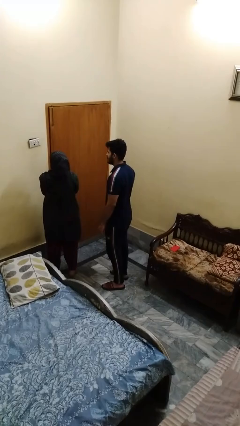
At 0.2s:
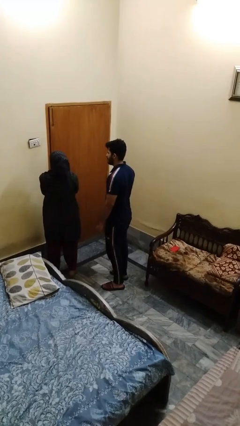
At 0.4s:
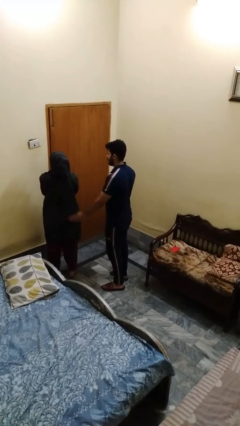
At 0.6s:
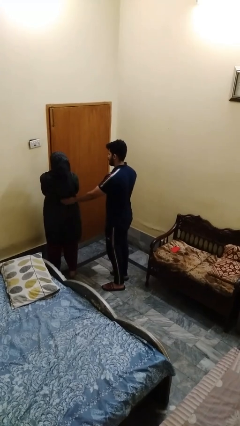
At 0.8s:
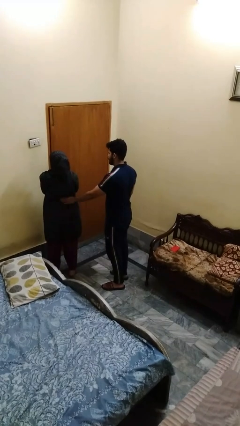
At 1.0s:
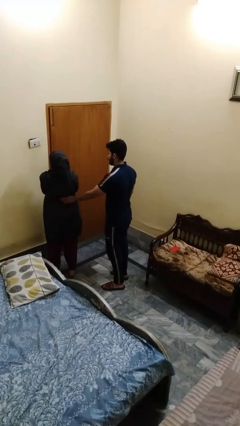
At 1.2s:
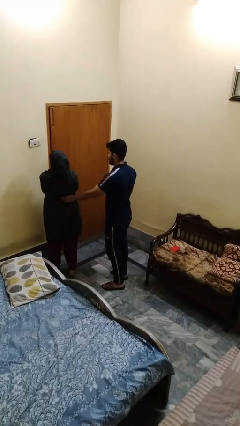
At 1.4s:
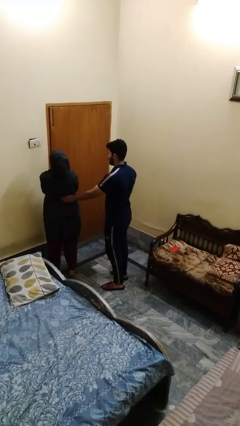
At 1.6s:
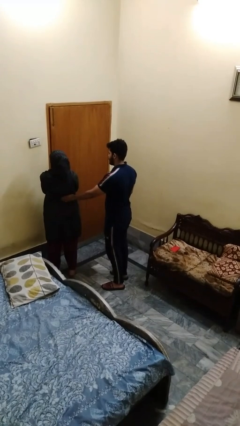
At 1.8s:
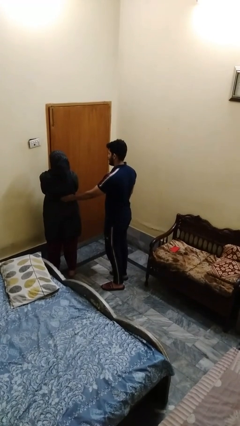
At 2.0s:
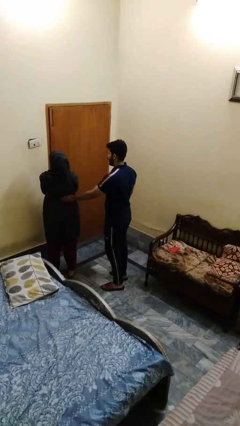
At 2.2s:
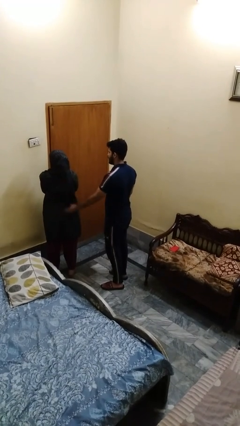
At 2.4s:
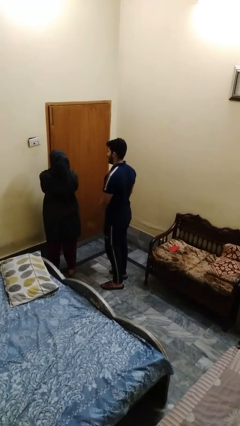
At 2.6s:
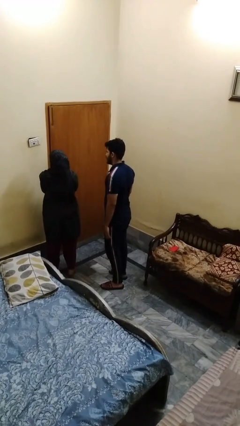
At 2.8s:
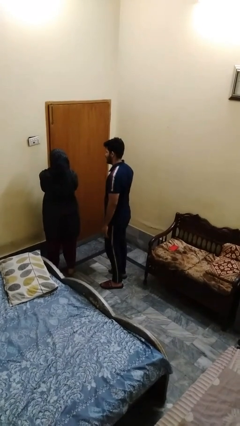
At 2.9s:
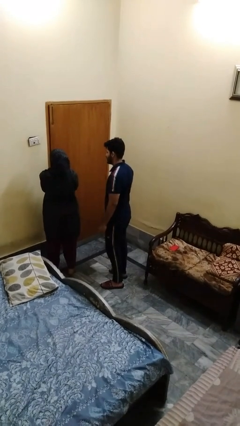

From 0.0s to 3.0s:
person touches back of person

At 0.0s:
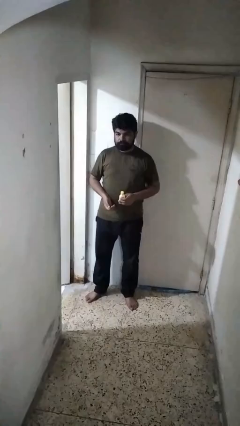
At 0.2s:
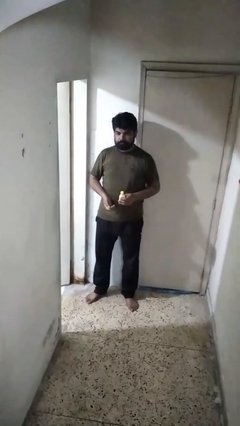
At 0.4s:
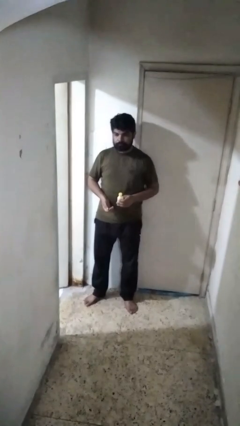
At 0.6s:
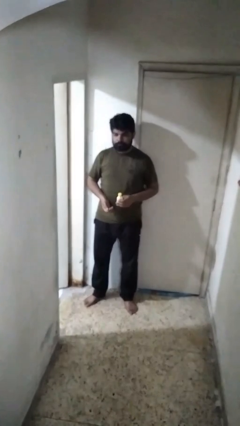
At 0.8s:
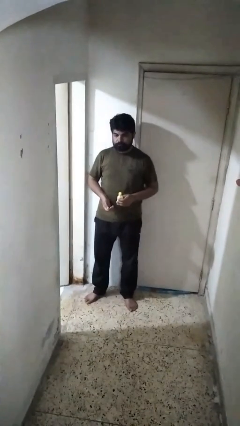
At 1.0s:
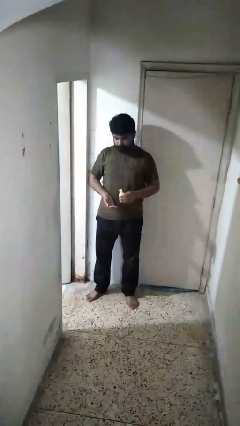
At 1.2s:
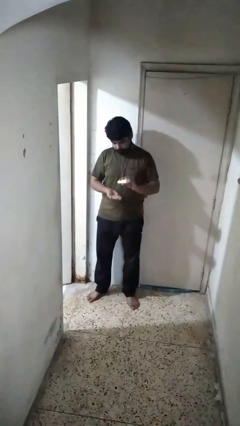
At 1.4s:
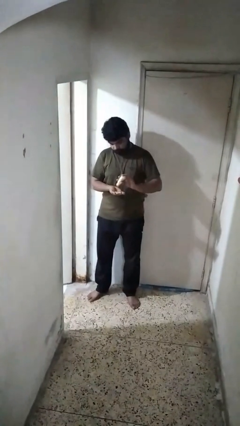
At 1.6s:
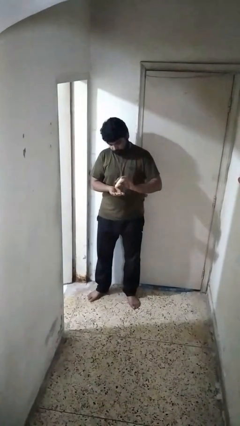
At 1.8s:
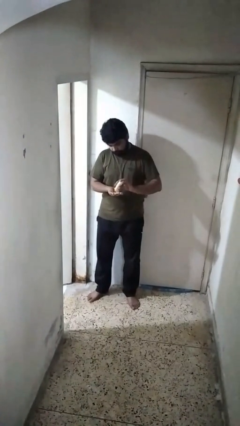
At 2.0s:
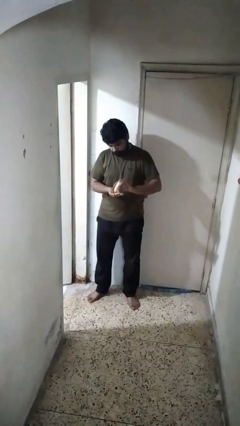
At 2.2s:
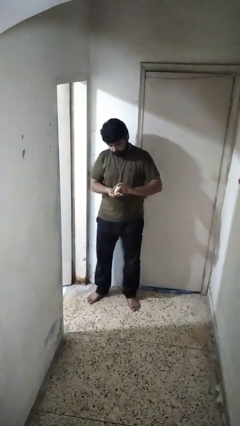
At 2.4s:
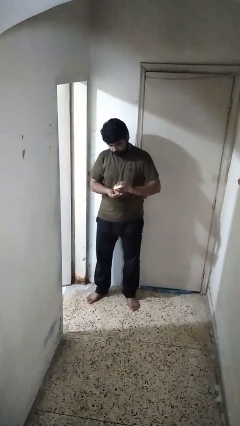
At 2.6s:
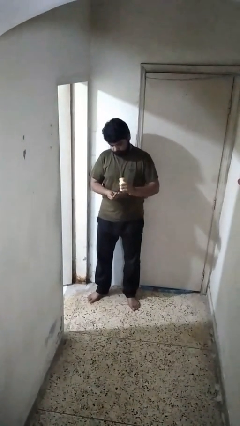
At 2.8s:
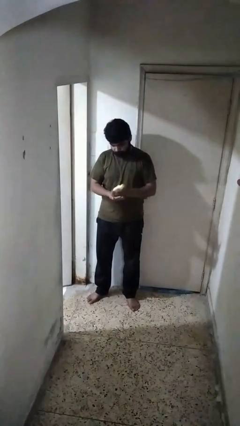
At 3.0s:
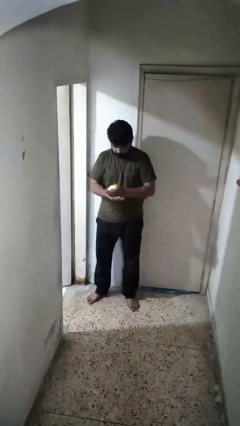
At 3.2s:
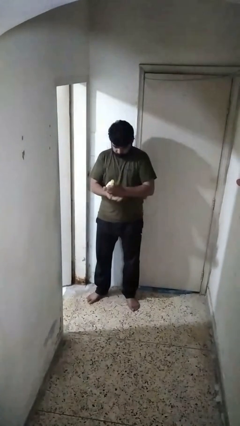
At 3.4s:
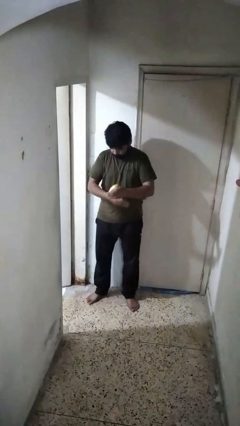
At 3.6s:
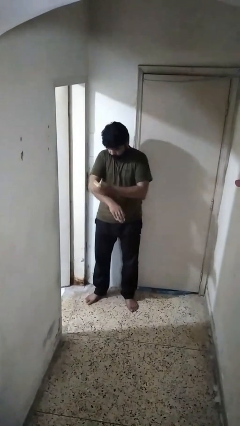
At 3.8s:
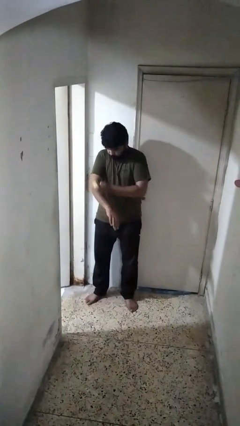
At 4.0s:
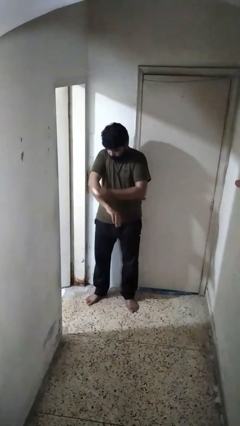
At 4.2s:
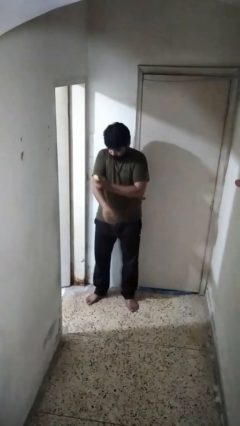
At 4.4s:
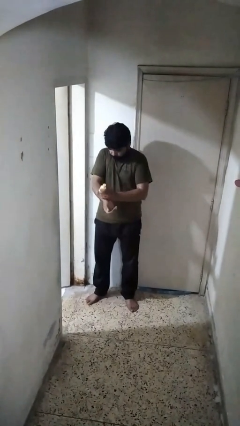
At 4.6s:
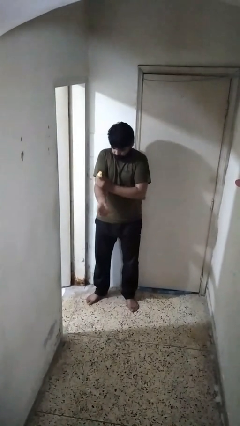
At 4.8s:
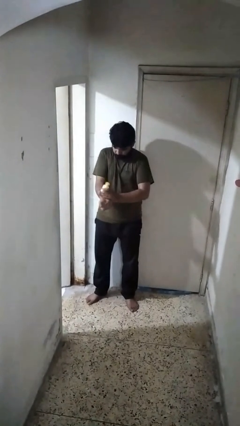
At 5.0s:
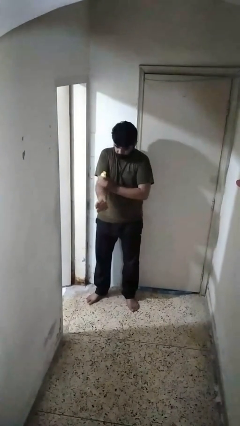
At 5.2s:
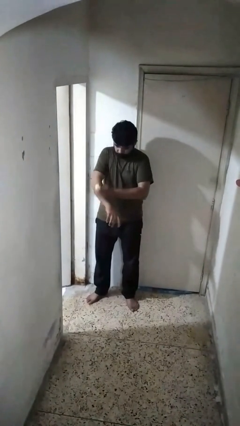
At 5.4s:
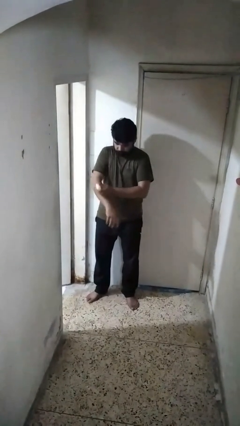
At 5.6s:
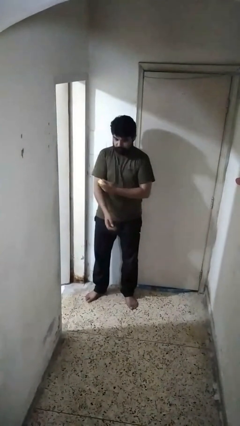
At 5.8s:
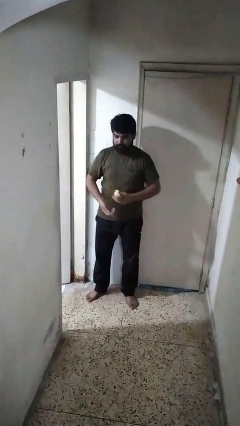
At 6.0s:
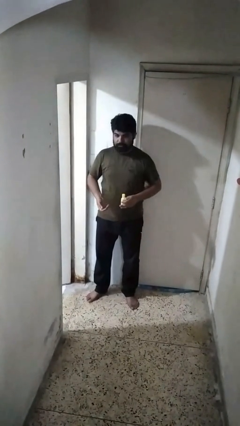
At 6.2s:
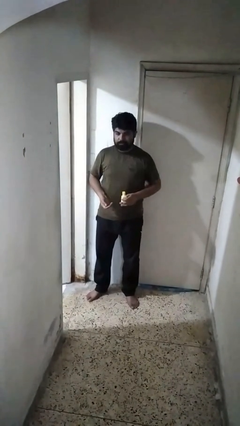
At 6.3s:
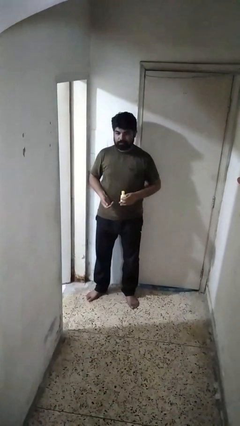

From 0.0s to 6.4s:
person applies sunscreen

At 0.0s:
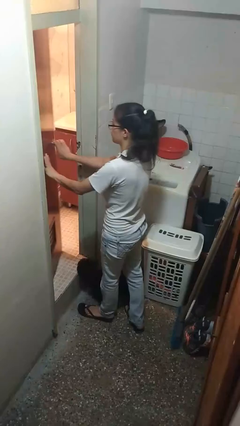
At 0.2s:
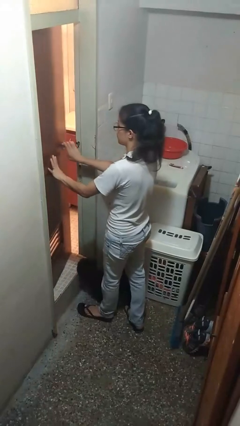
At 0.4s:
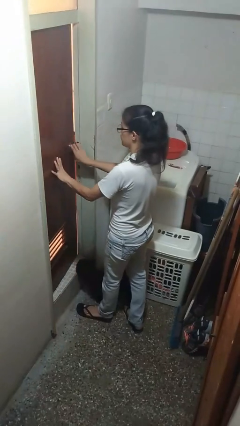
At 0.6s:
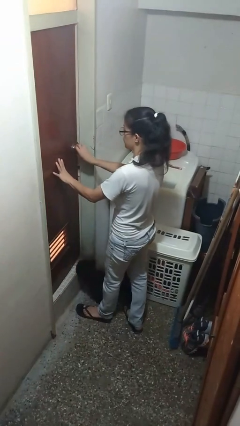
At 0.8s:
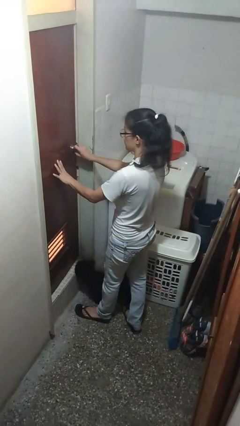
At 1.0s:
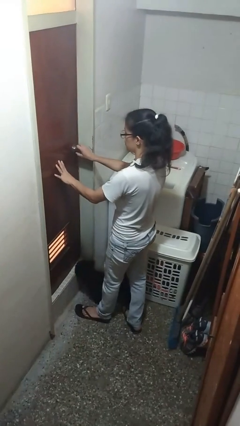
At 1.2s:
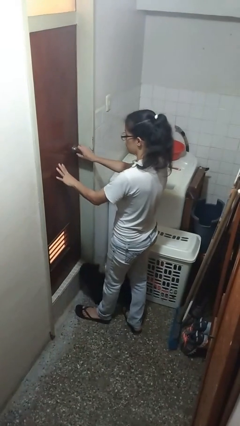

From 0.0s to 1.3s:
person closes facility door

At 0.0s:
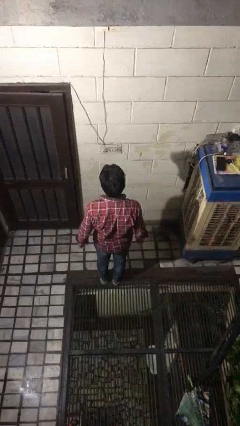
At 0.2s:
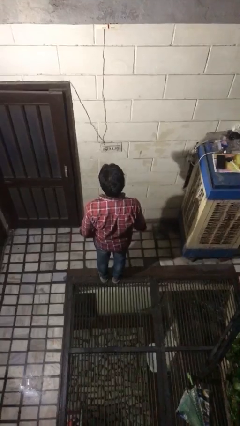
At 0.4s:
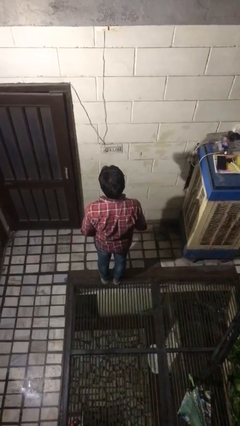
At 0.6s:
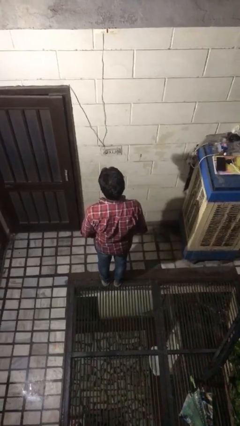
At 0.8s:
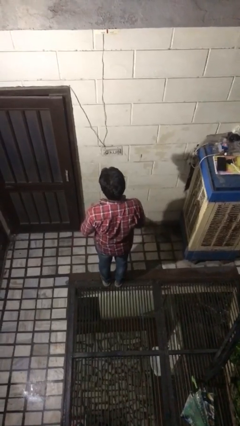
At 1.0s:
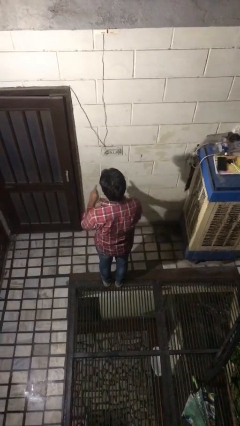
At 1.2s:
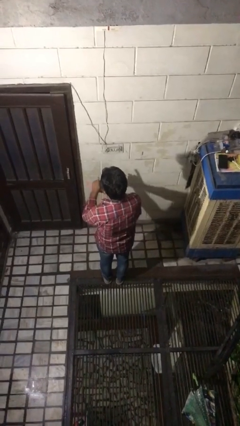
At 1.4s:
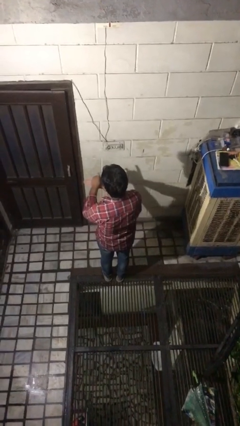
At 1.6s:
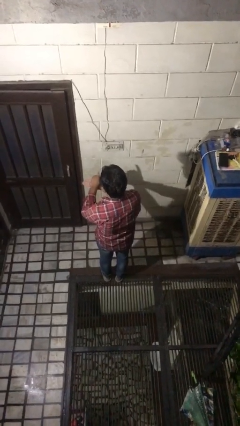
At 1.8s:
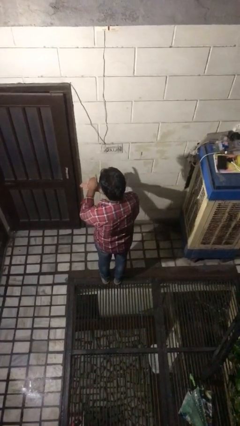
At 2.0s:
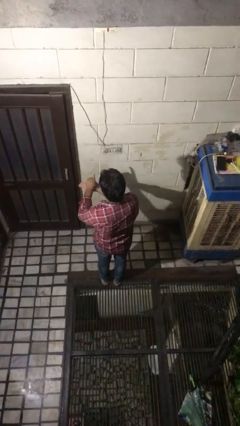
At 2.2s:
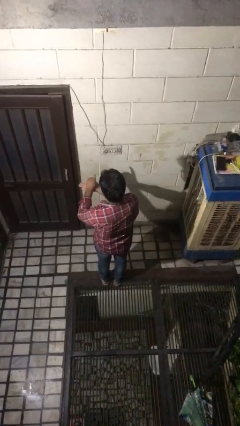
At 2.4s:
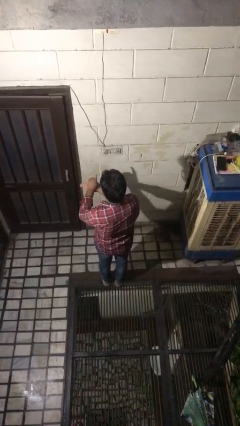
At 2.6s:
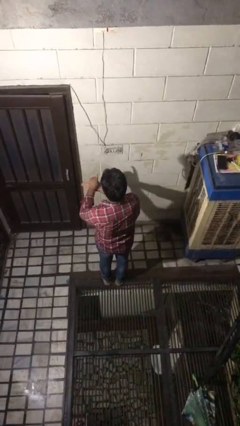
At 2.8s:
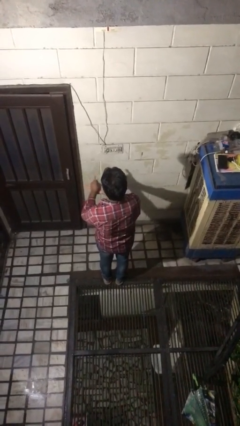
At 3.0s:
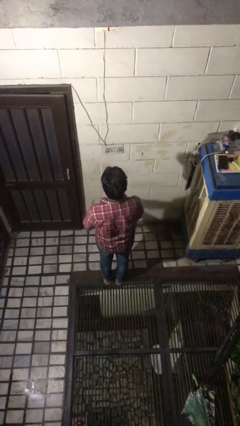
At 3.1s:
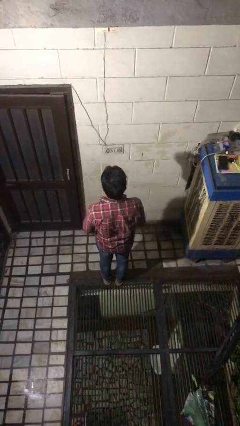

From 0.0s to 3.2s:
person gestures number one

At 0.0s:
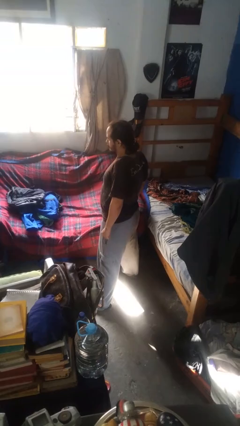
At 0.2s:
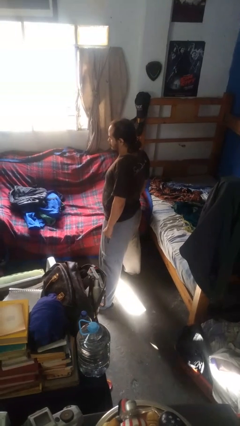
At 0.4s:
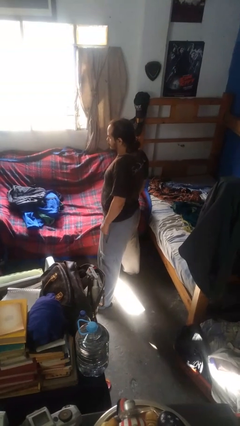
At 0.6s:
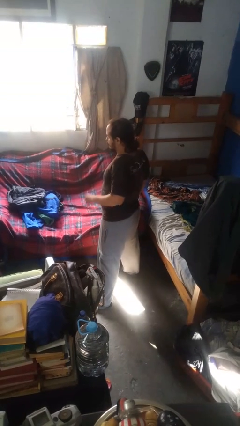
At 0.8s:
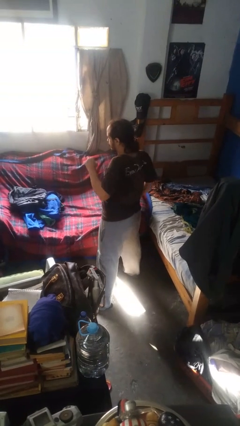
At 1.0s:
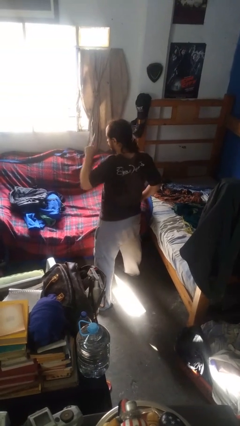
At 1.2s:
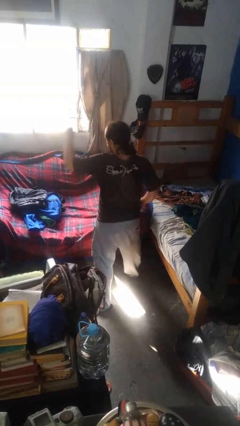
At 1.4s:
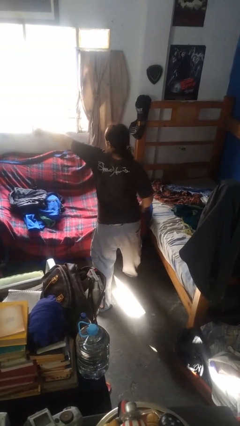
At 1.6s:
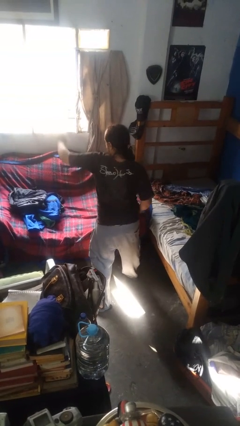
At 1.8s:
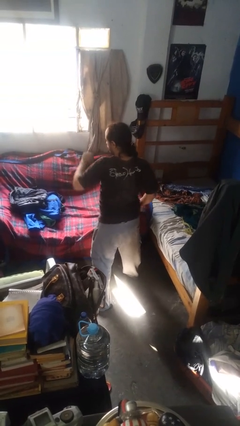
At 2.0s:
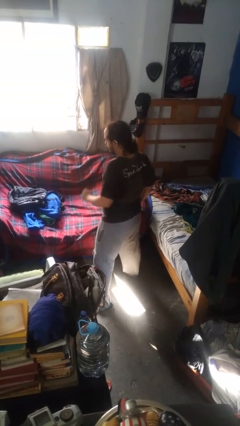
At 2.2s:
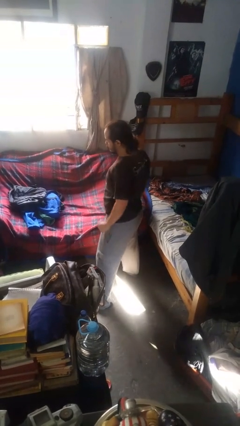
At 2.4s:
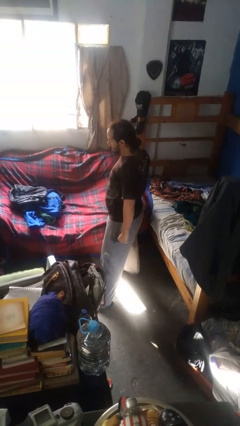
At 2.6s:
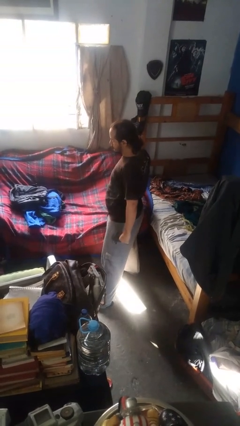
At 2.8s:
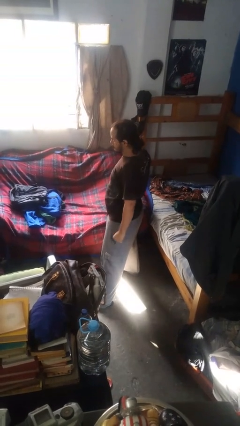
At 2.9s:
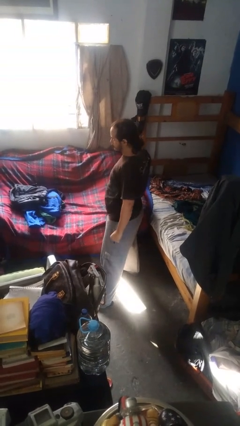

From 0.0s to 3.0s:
person punches

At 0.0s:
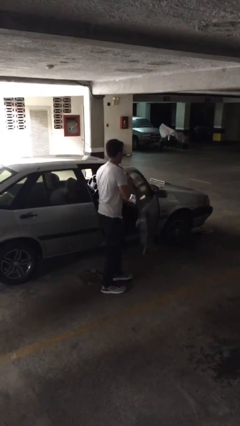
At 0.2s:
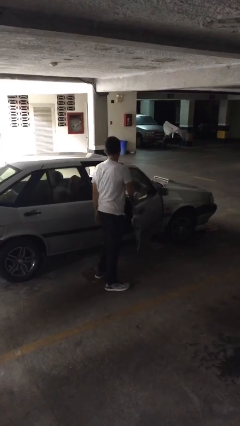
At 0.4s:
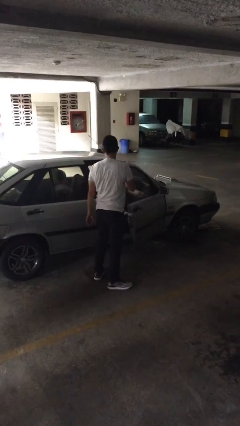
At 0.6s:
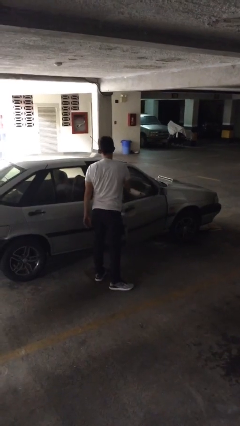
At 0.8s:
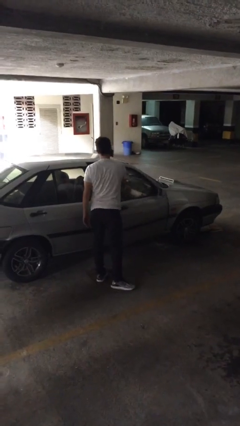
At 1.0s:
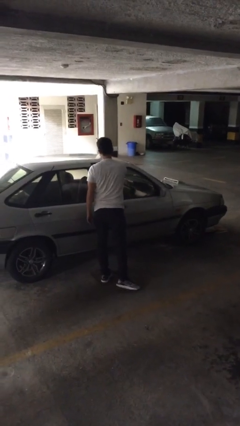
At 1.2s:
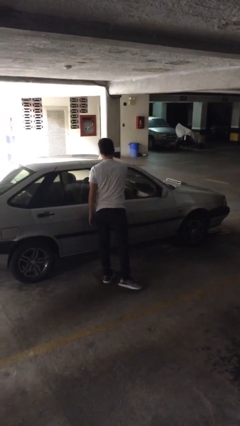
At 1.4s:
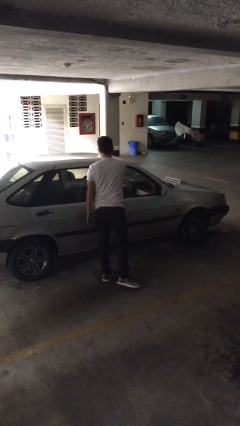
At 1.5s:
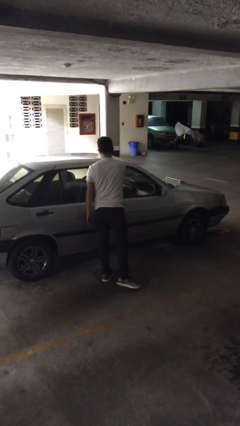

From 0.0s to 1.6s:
person closes car door
